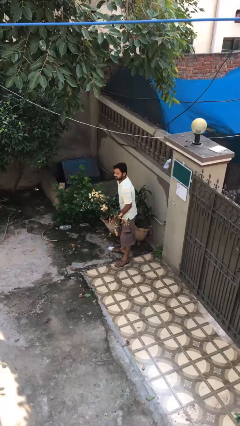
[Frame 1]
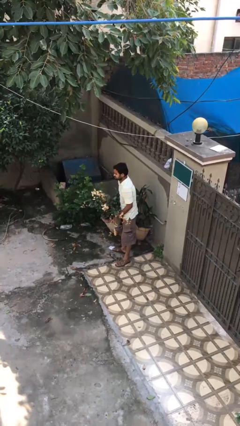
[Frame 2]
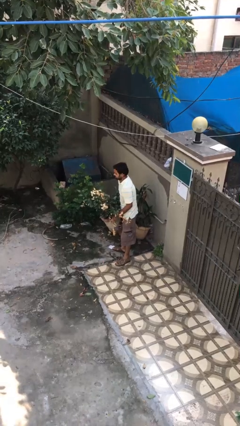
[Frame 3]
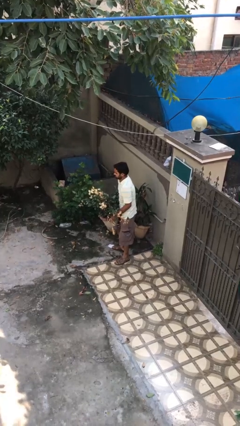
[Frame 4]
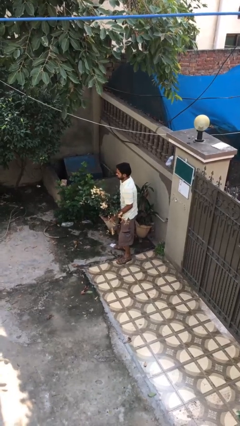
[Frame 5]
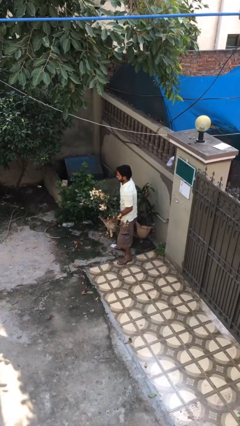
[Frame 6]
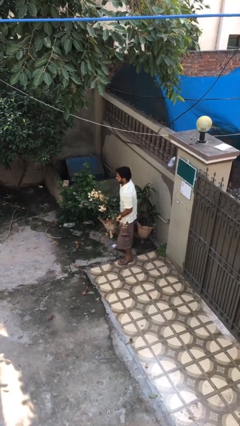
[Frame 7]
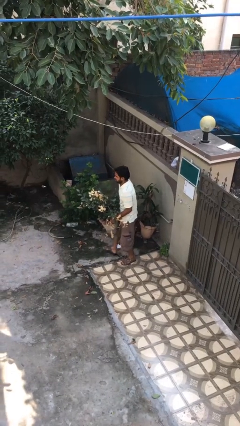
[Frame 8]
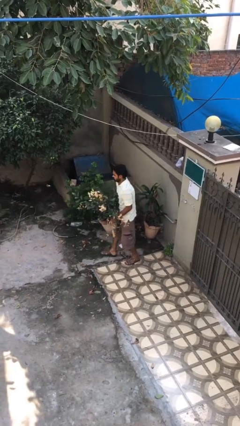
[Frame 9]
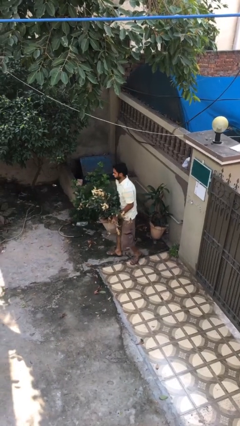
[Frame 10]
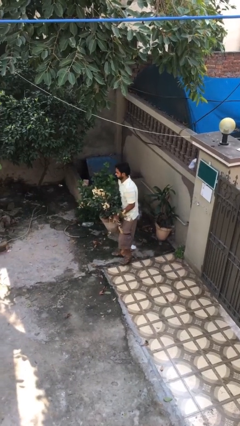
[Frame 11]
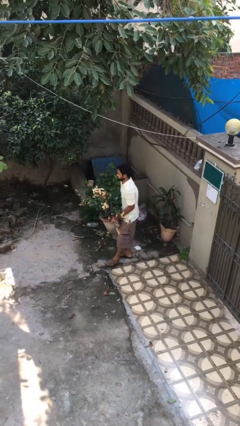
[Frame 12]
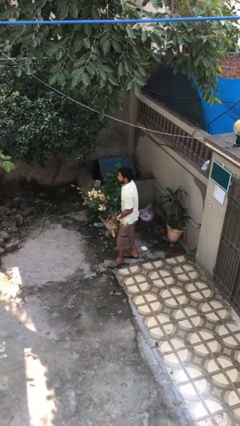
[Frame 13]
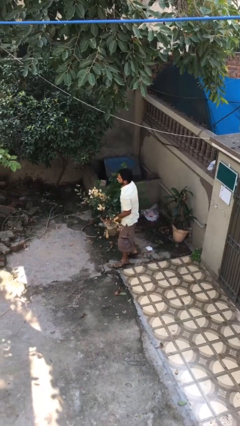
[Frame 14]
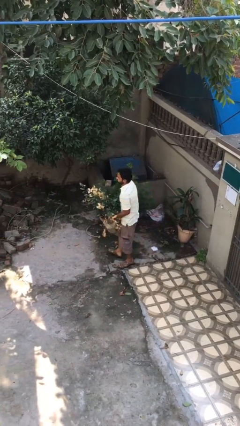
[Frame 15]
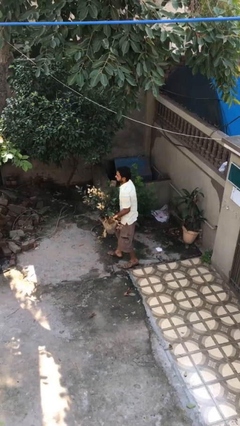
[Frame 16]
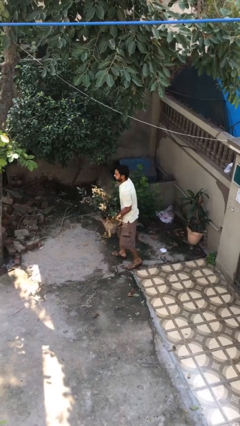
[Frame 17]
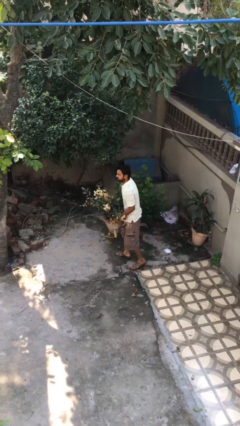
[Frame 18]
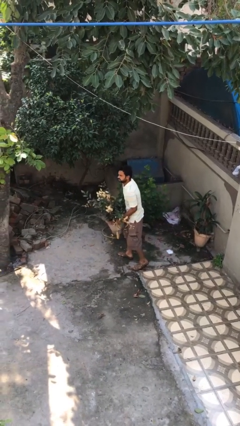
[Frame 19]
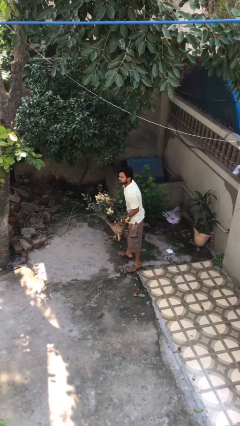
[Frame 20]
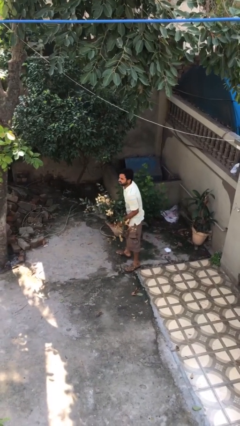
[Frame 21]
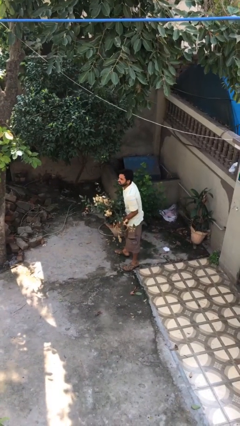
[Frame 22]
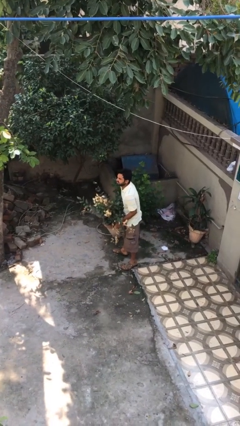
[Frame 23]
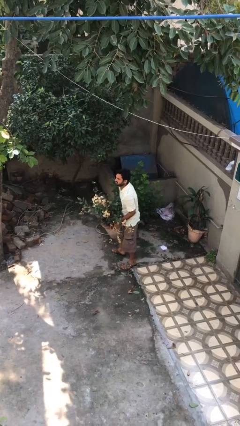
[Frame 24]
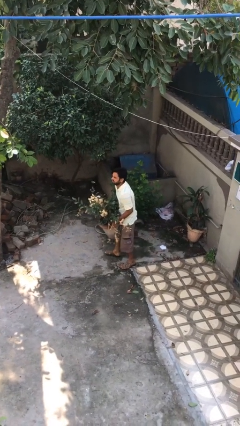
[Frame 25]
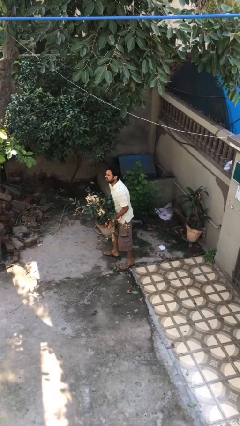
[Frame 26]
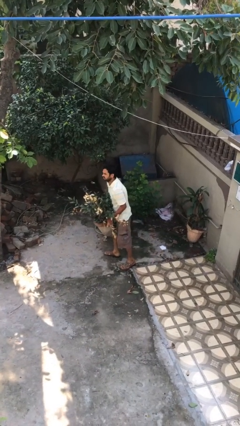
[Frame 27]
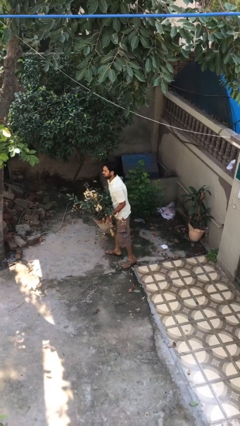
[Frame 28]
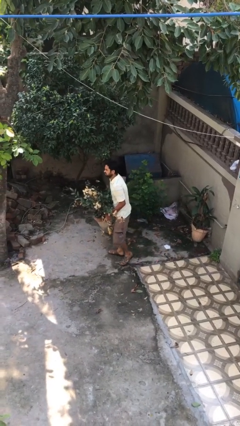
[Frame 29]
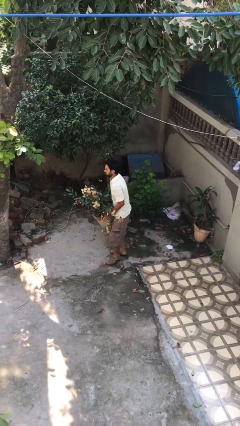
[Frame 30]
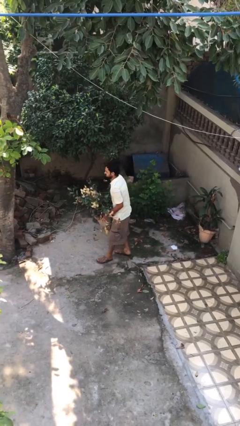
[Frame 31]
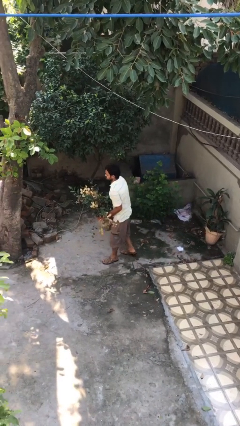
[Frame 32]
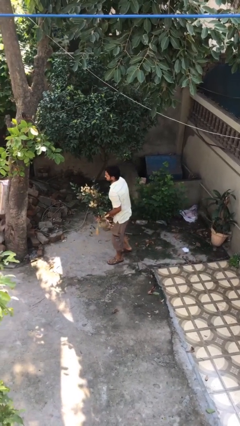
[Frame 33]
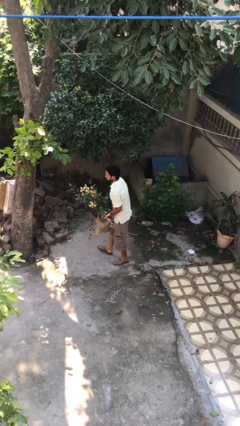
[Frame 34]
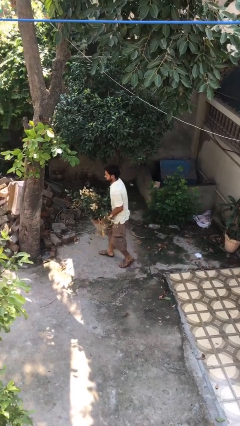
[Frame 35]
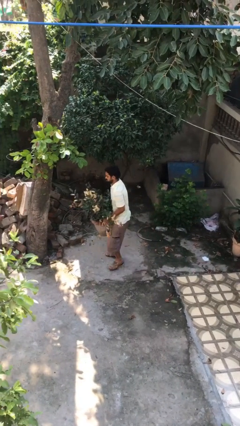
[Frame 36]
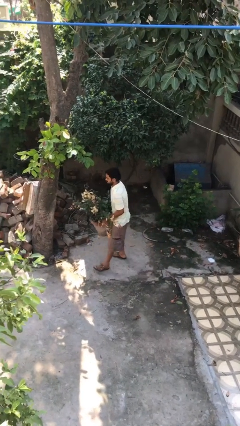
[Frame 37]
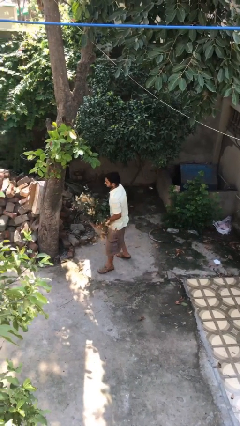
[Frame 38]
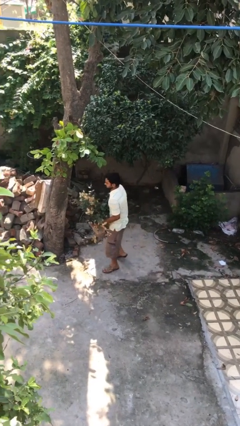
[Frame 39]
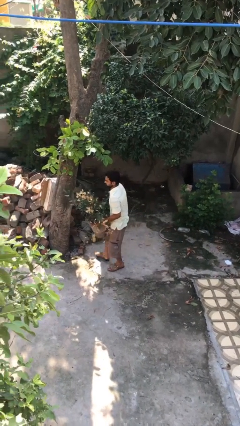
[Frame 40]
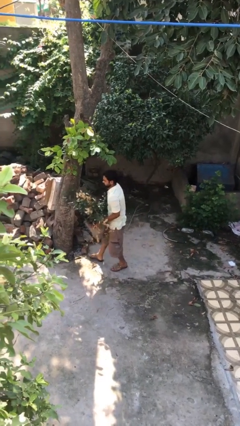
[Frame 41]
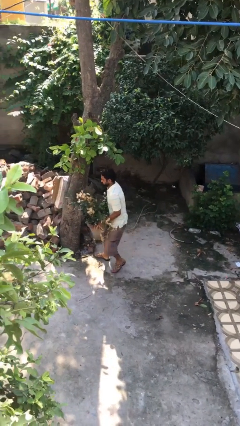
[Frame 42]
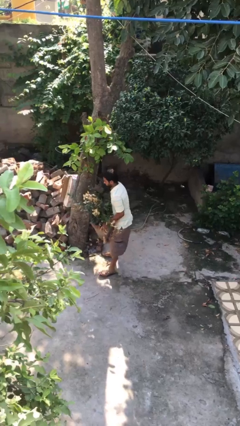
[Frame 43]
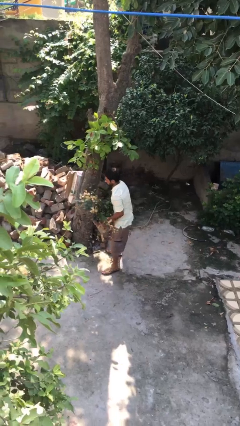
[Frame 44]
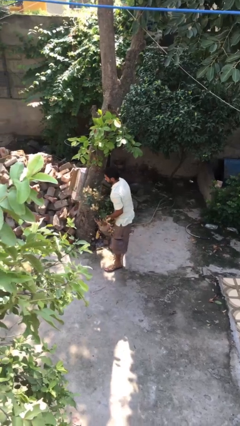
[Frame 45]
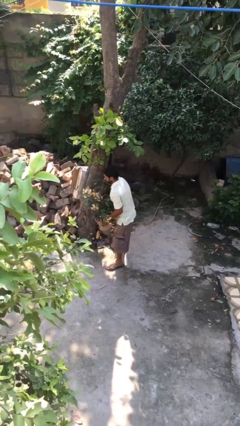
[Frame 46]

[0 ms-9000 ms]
person carries heavy object

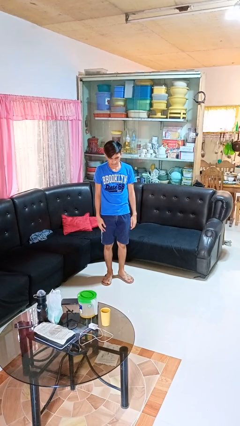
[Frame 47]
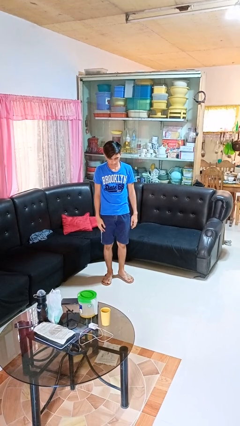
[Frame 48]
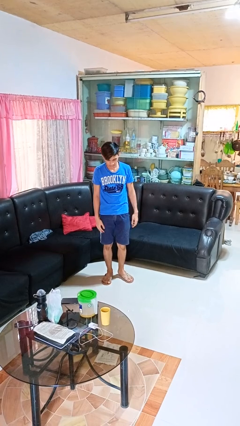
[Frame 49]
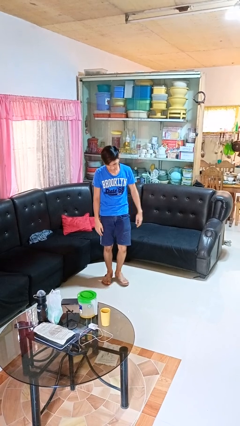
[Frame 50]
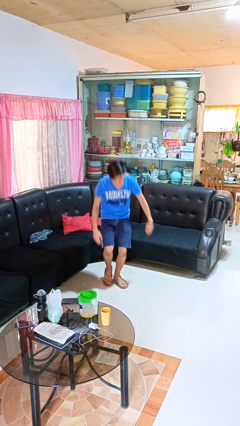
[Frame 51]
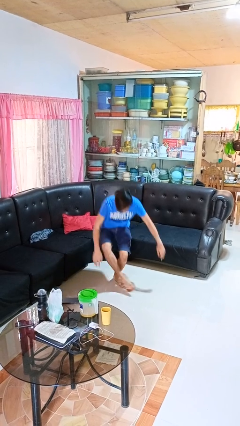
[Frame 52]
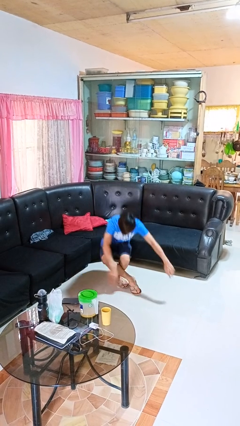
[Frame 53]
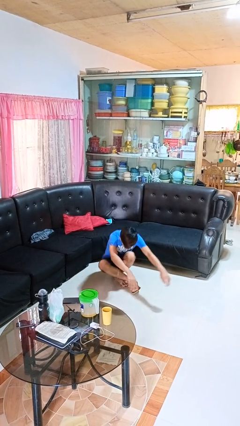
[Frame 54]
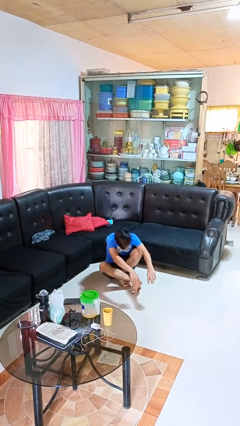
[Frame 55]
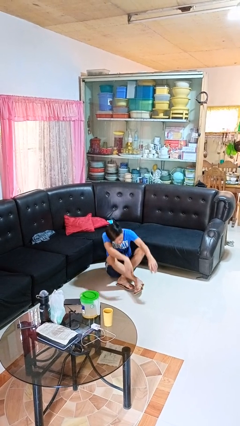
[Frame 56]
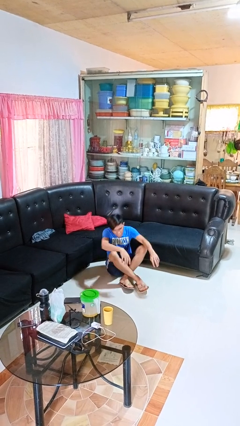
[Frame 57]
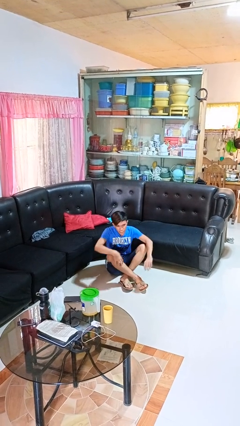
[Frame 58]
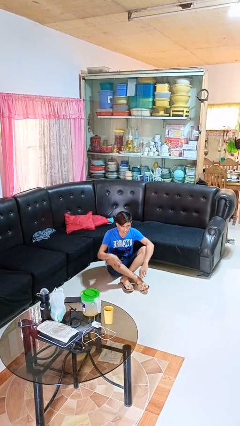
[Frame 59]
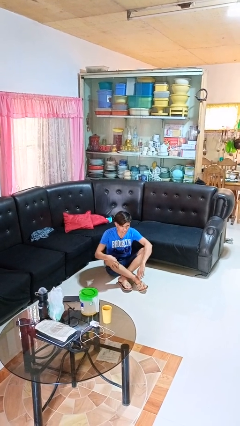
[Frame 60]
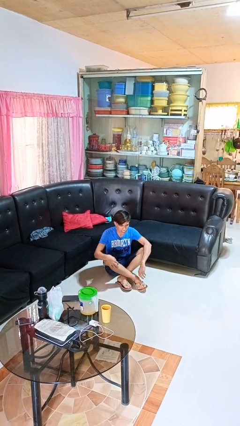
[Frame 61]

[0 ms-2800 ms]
person sits crisscross

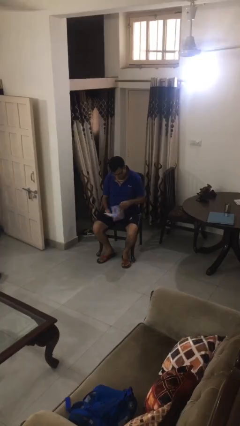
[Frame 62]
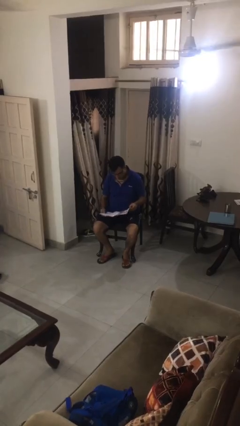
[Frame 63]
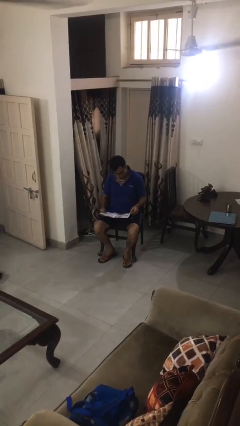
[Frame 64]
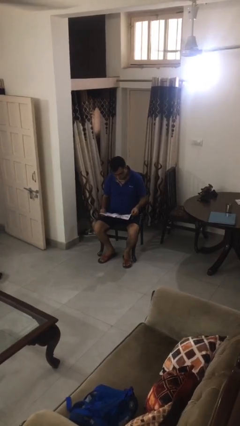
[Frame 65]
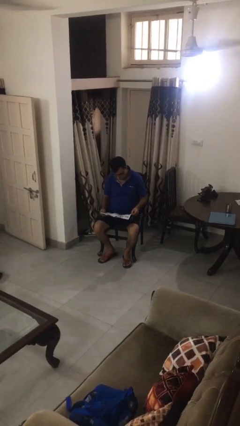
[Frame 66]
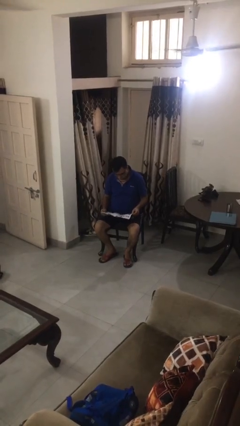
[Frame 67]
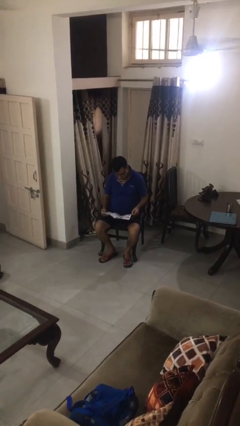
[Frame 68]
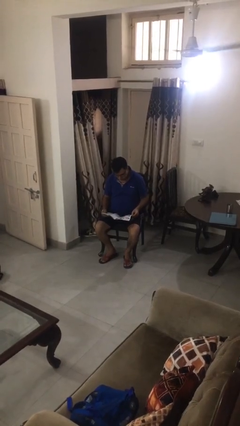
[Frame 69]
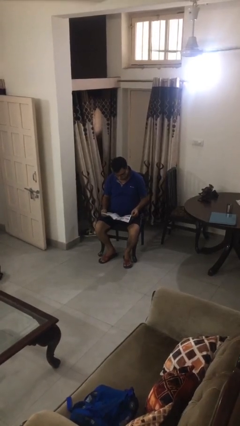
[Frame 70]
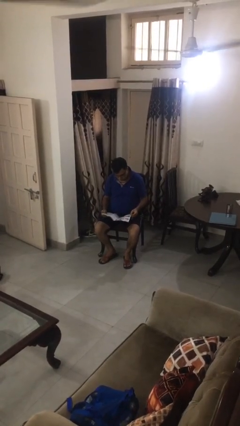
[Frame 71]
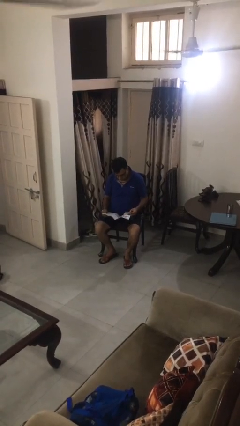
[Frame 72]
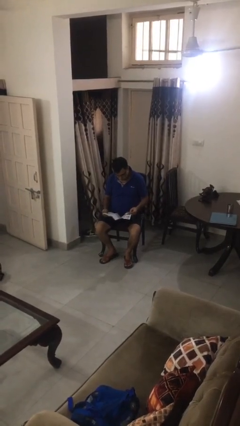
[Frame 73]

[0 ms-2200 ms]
person reads magazine

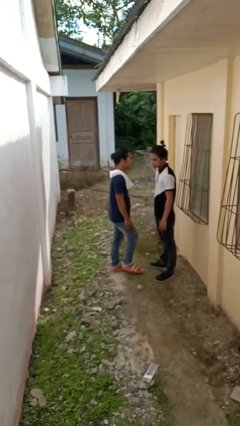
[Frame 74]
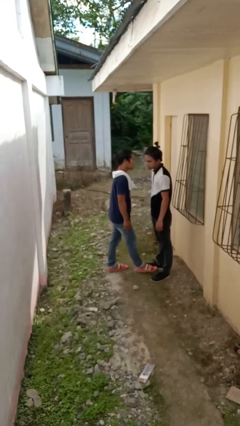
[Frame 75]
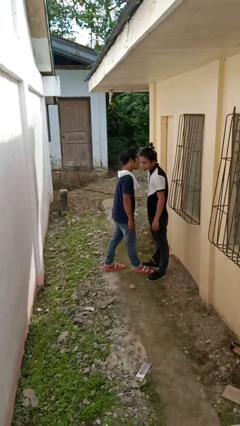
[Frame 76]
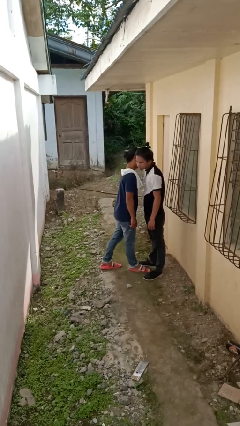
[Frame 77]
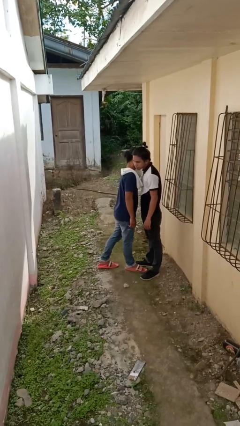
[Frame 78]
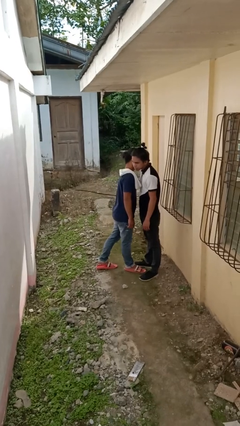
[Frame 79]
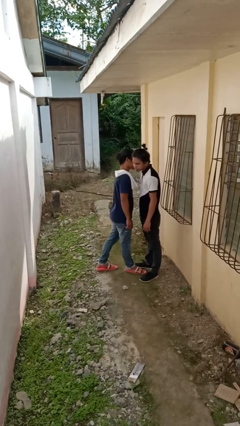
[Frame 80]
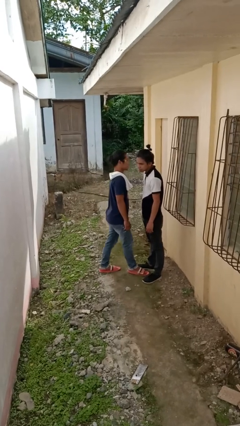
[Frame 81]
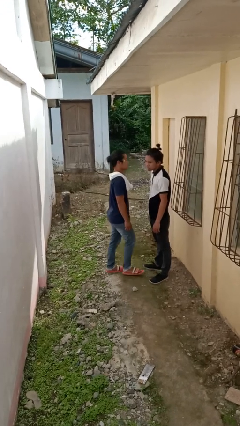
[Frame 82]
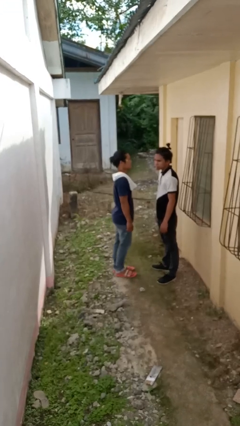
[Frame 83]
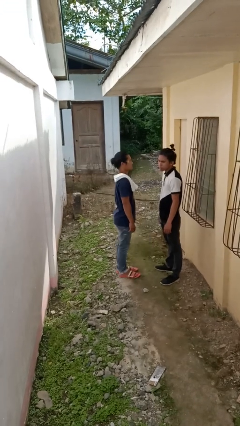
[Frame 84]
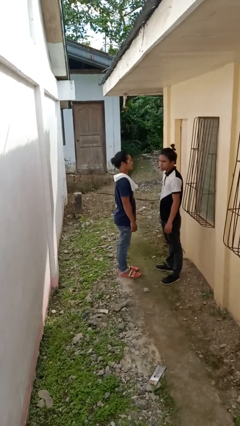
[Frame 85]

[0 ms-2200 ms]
person kisses cheek of person

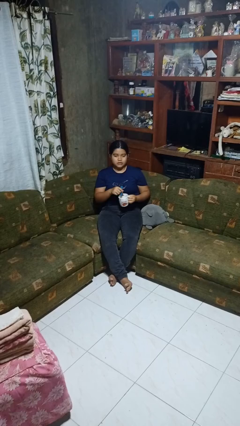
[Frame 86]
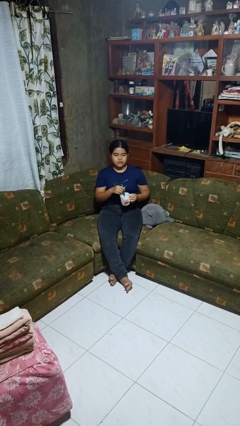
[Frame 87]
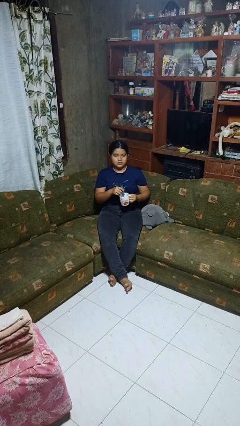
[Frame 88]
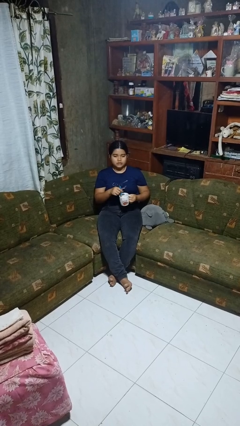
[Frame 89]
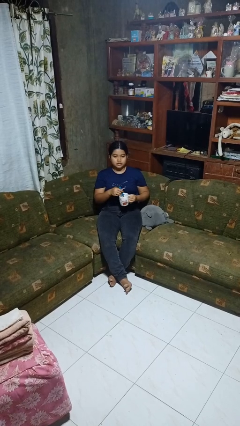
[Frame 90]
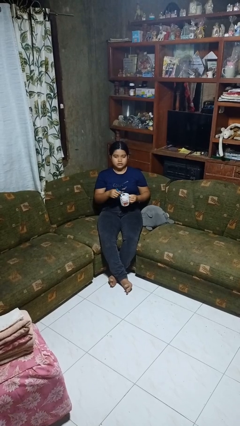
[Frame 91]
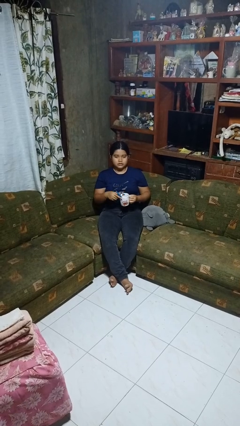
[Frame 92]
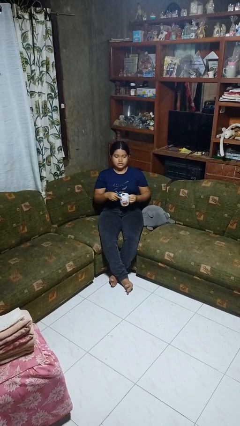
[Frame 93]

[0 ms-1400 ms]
person stirs mug
